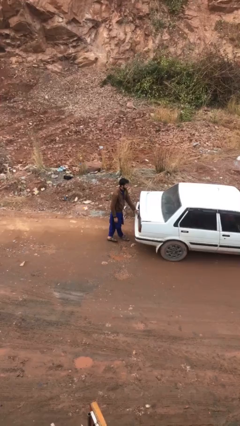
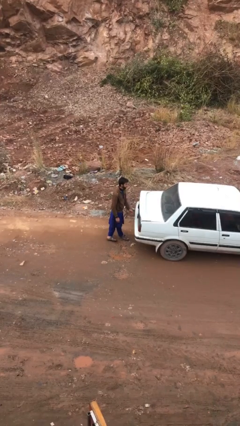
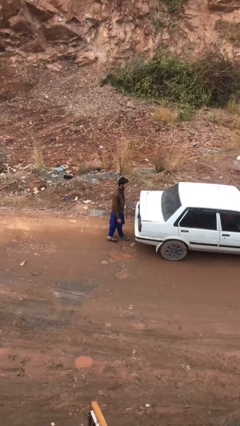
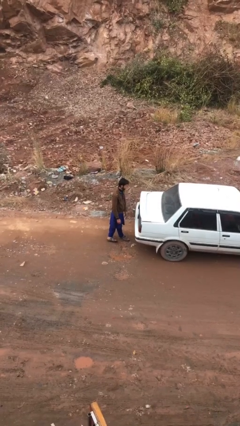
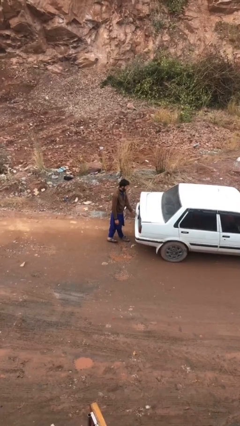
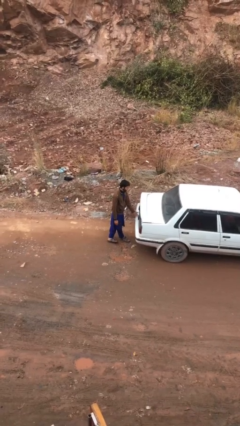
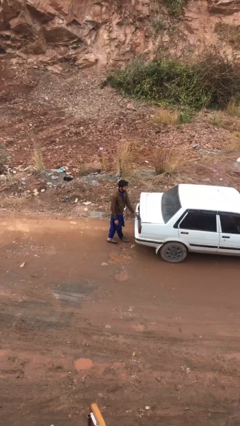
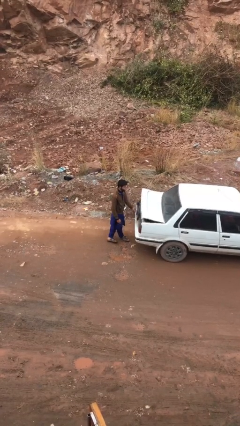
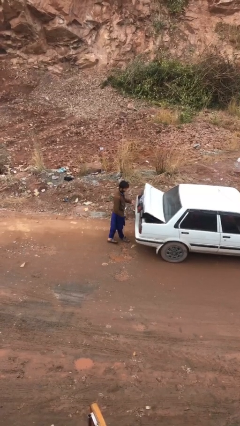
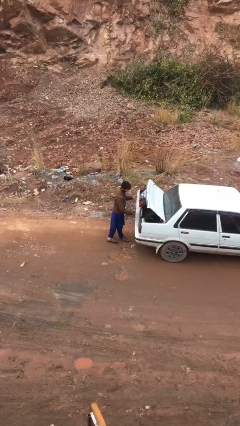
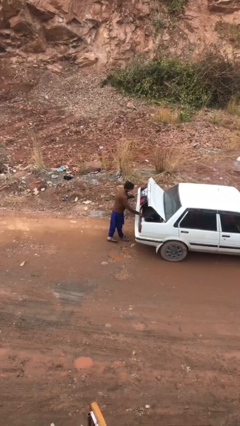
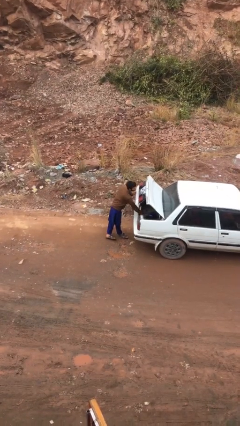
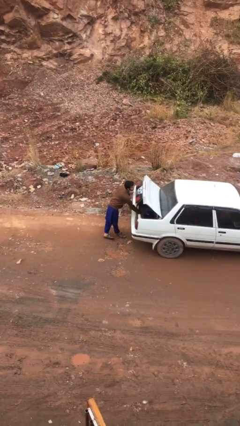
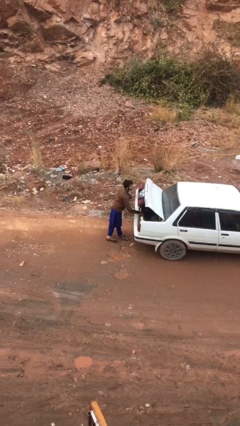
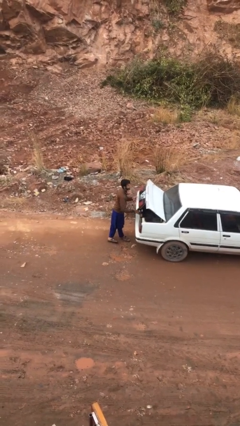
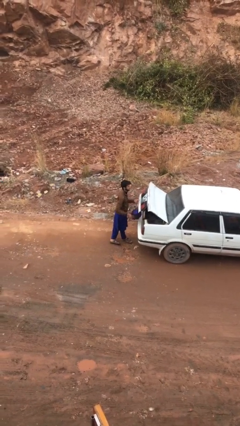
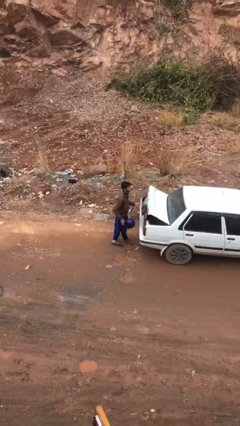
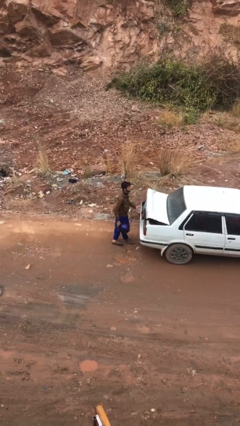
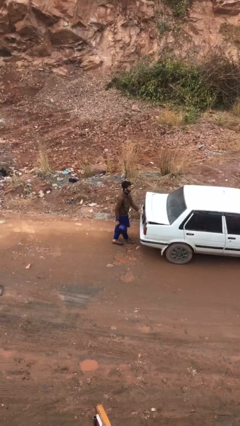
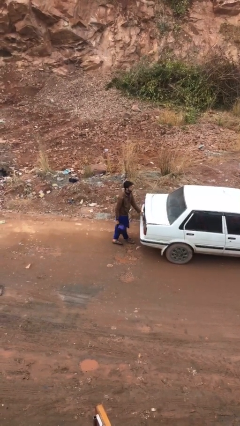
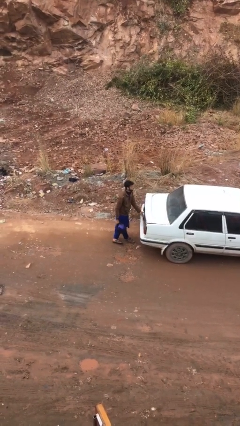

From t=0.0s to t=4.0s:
person unloads car

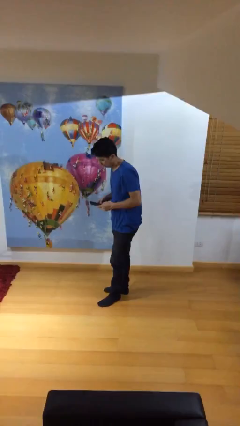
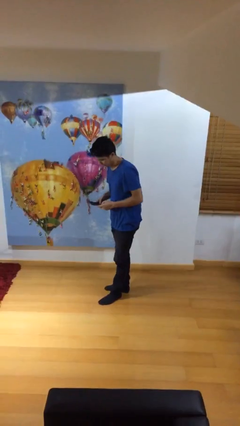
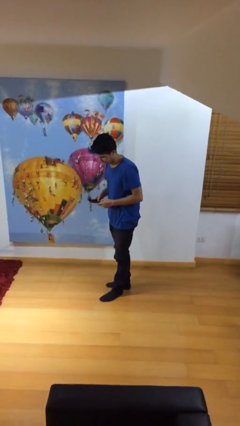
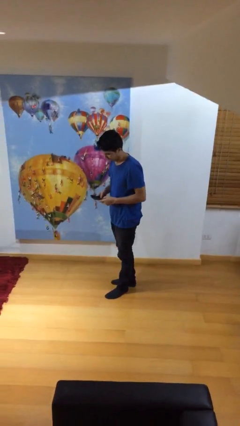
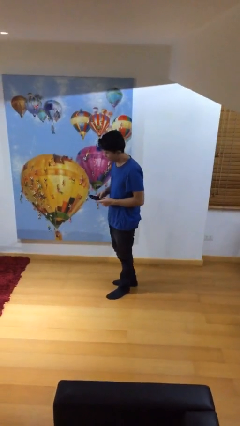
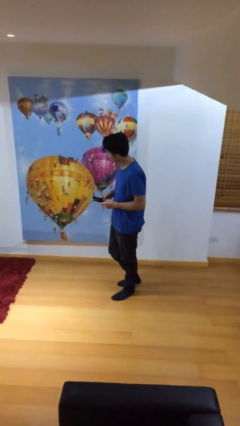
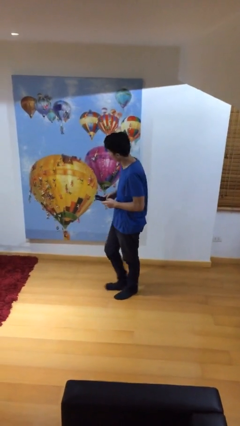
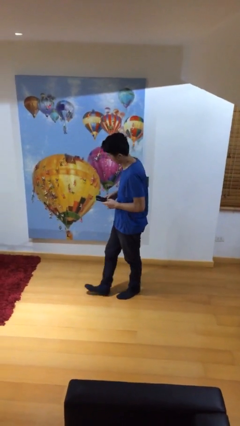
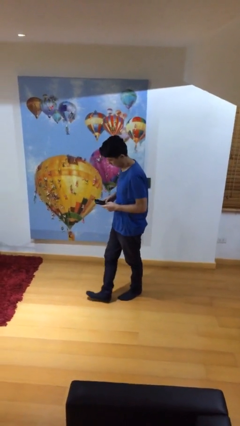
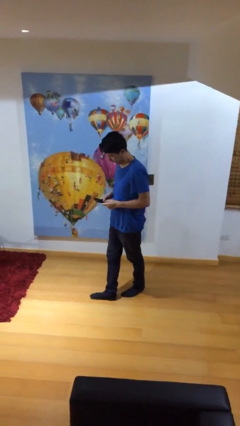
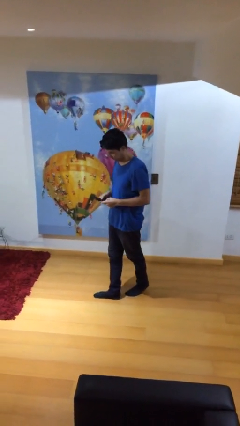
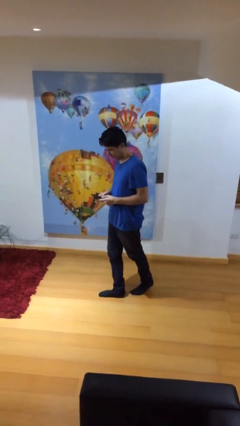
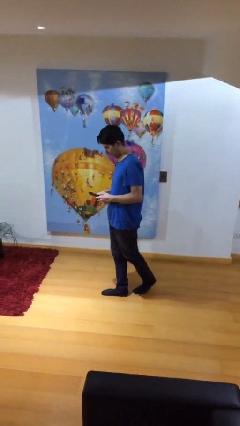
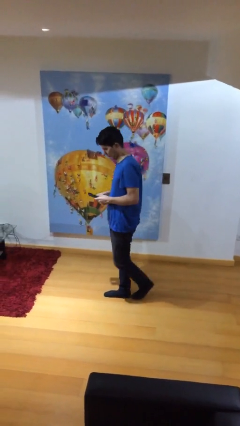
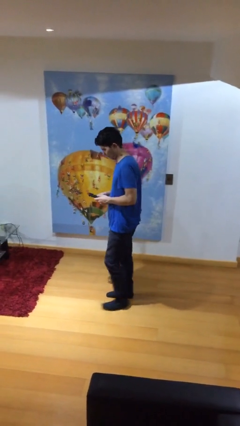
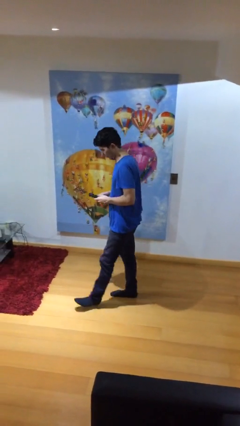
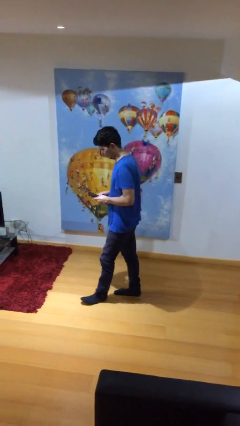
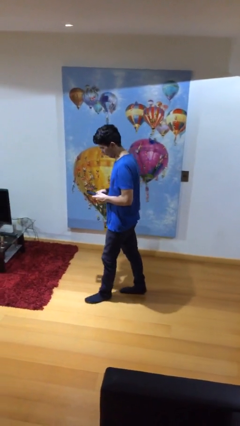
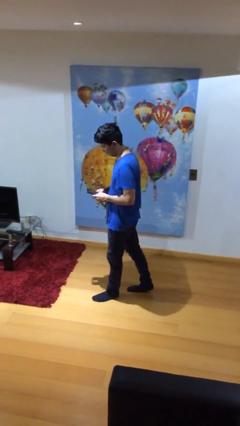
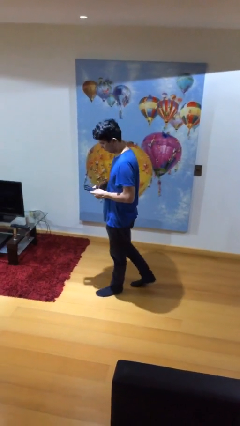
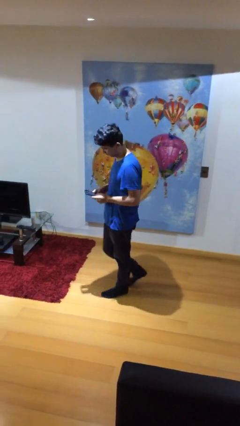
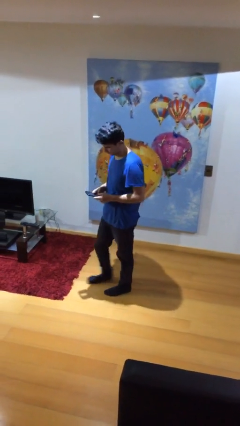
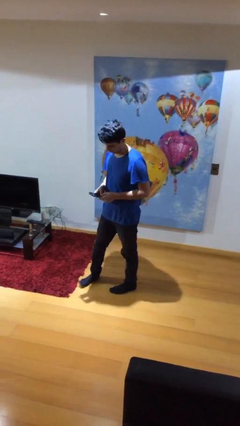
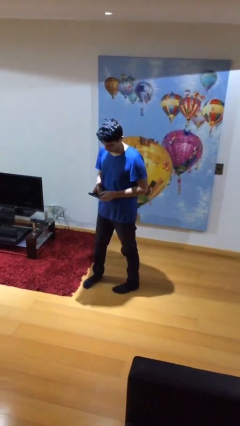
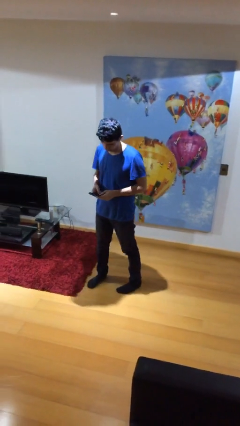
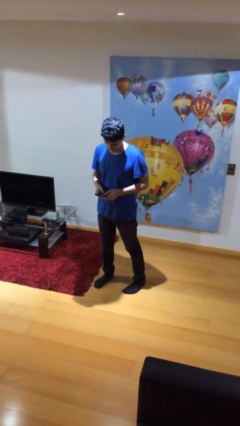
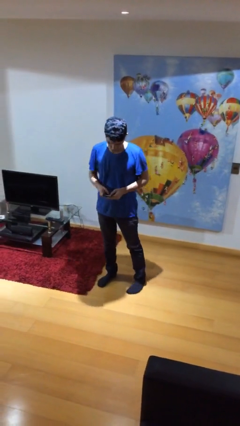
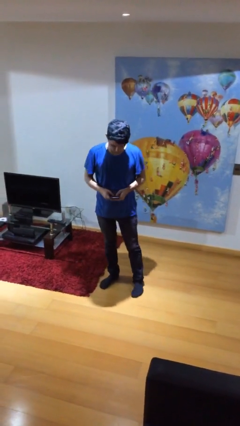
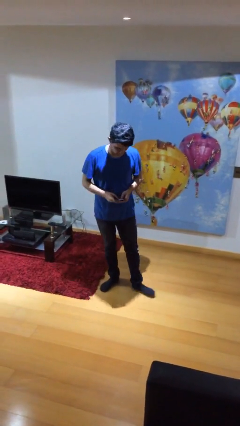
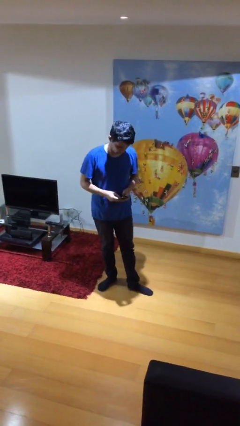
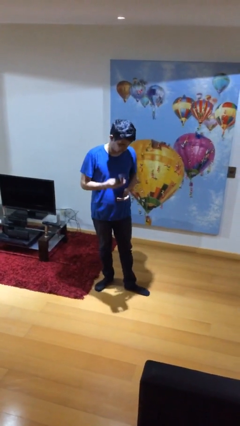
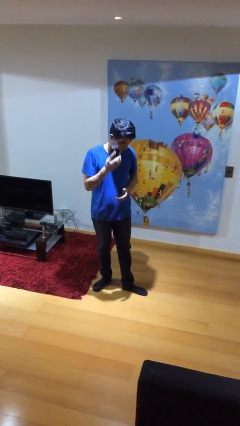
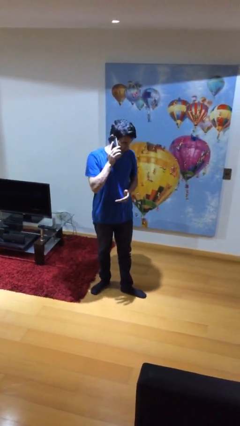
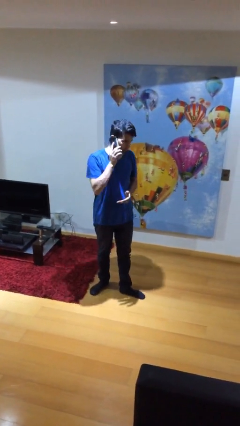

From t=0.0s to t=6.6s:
person texts on phone

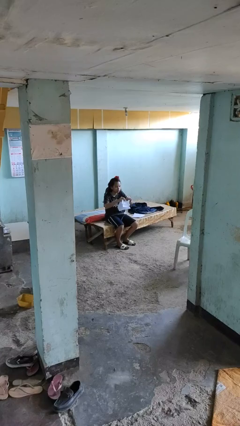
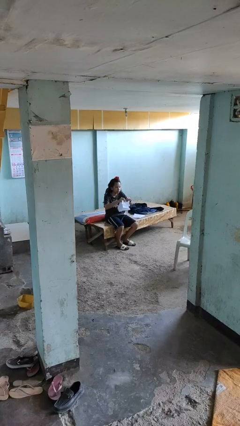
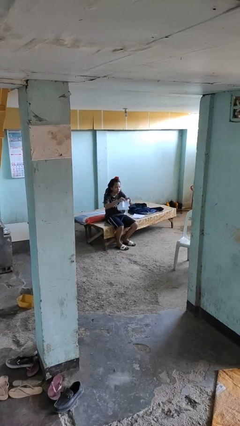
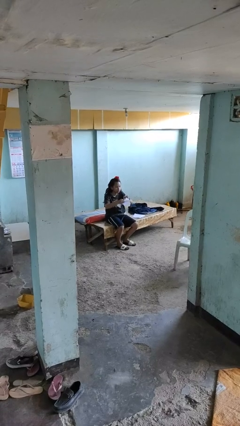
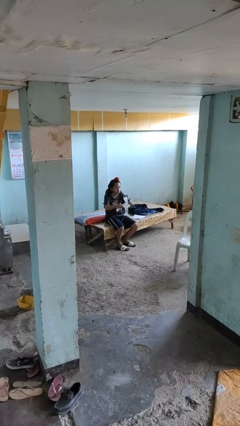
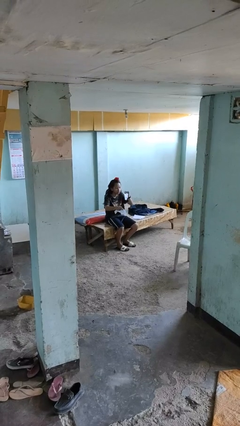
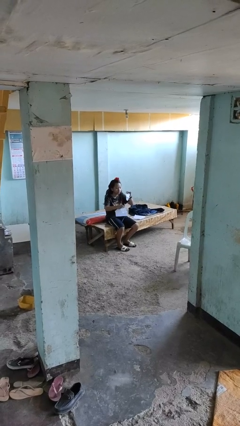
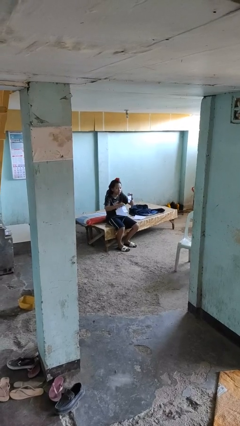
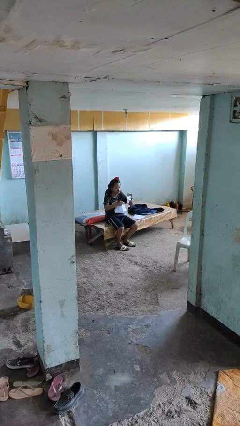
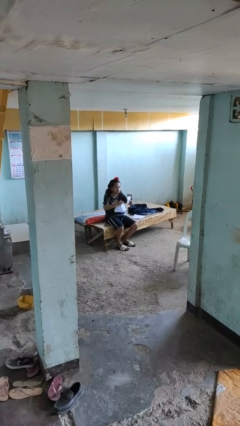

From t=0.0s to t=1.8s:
person tears paper

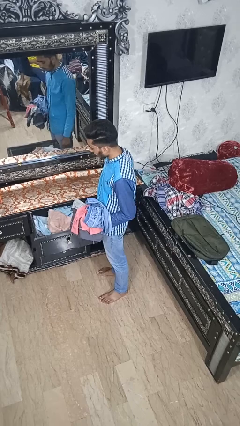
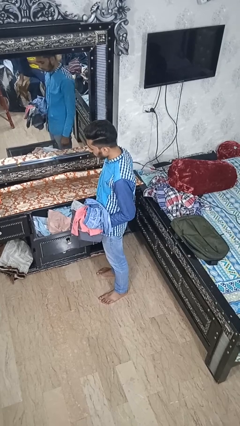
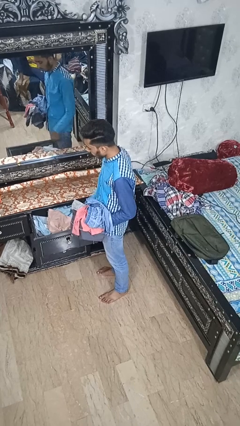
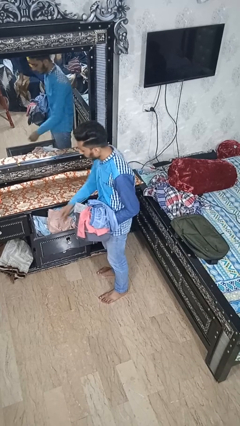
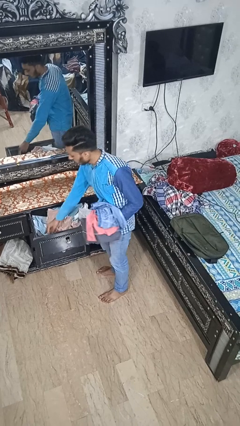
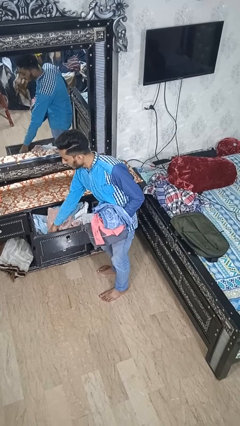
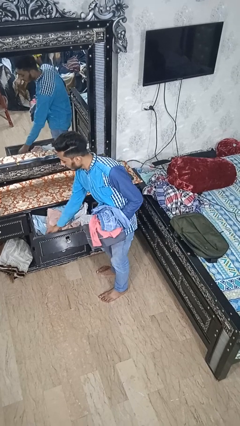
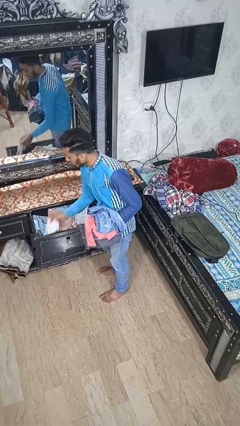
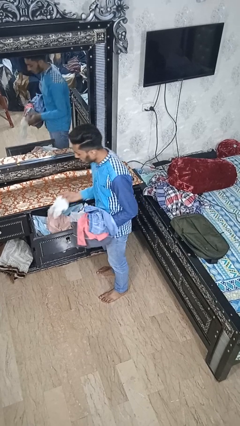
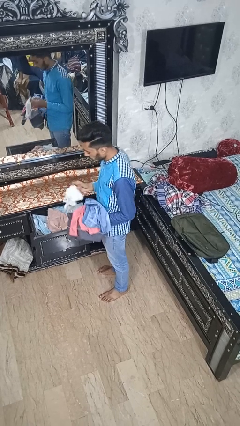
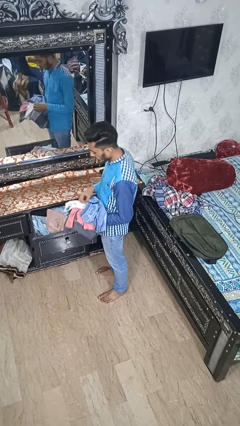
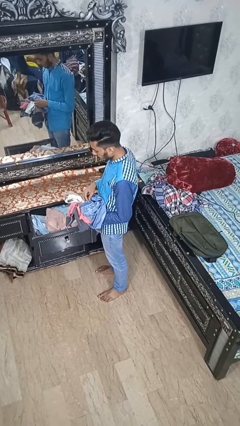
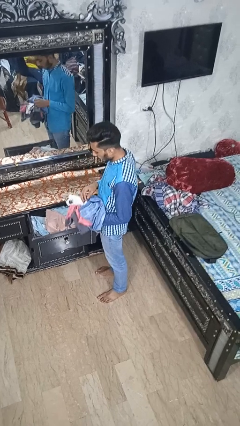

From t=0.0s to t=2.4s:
person takes clothes from dresser

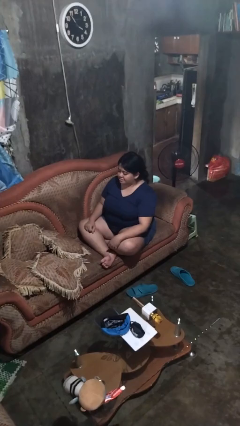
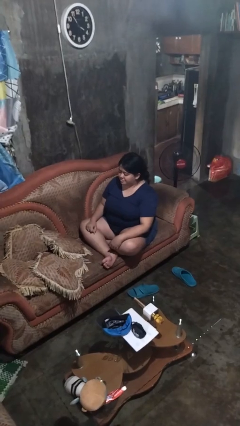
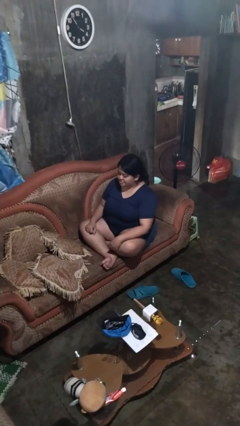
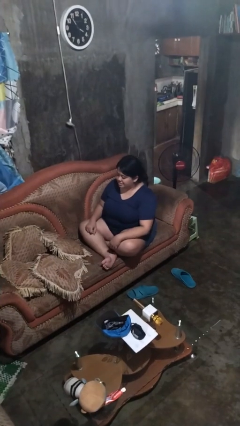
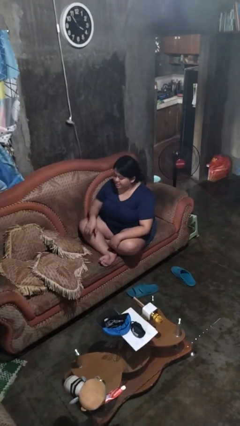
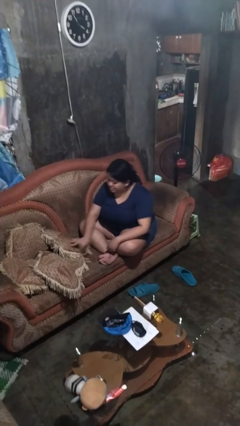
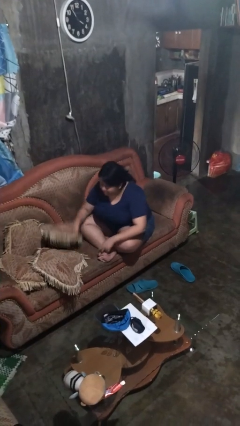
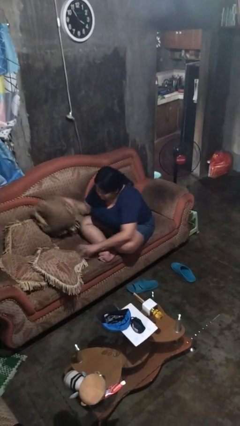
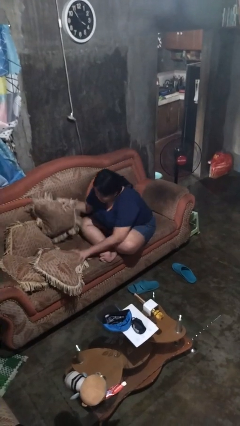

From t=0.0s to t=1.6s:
person searches in couch

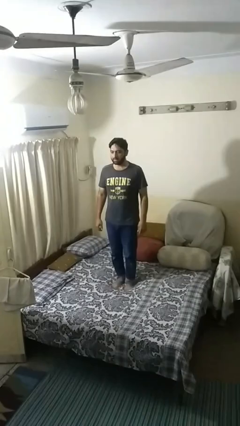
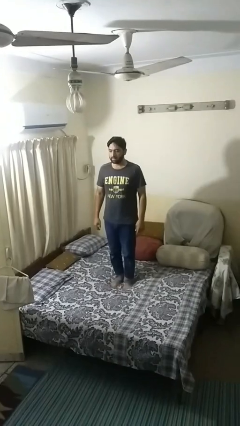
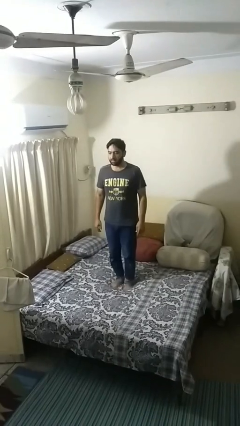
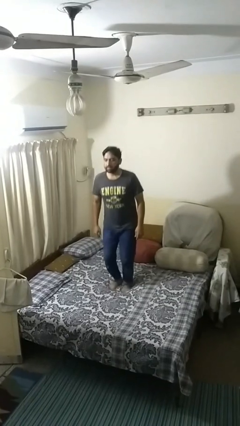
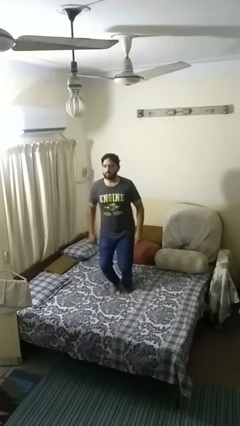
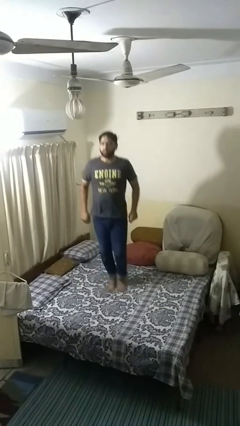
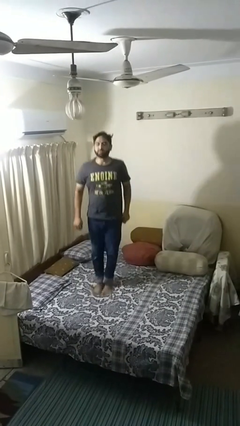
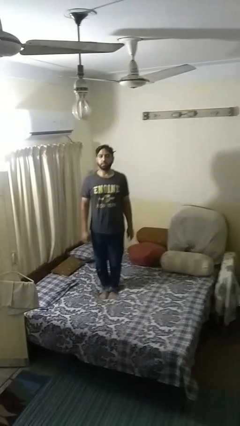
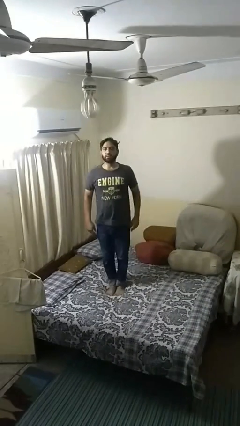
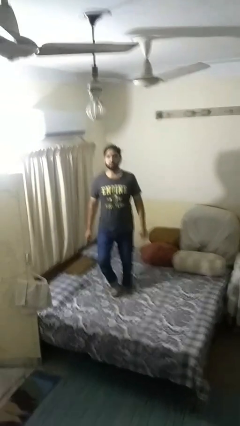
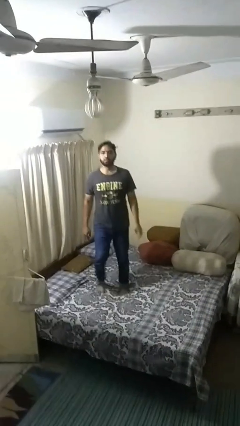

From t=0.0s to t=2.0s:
person jumps on bed
